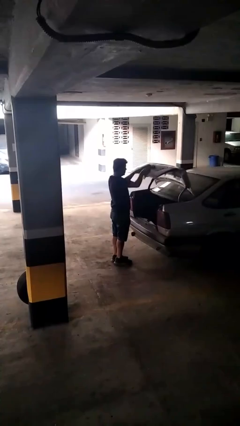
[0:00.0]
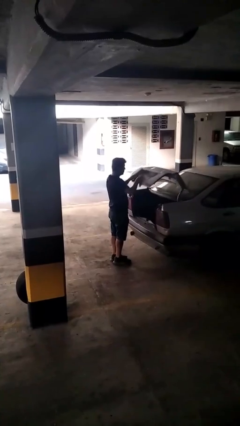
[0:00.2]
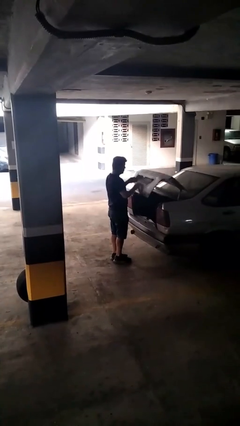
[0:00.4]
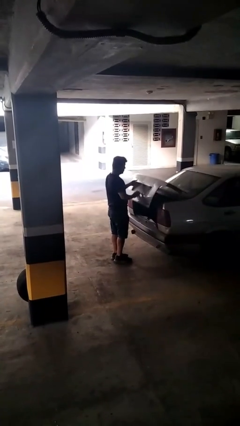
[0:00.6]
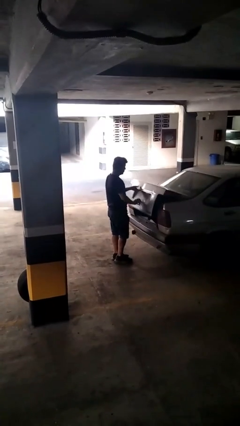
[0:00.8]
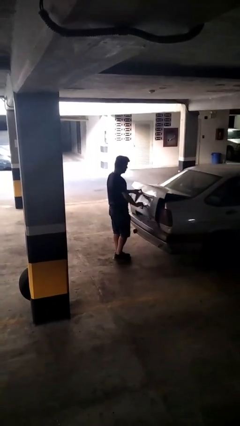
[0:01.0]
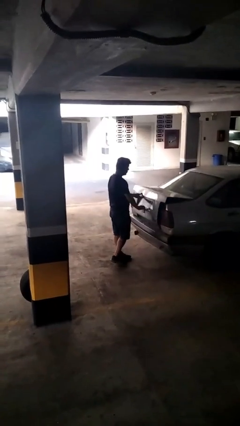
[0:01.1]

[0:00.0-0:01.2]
person closes car trunk

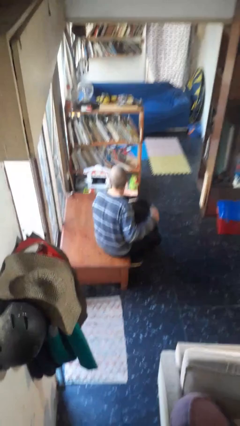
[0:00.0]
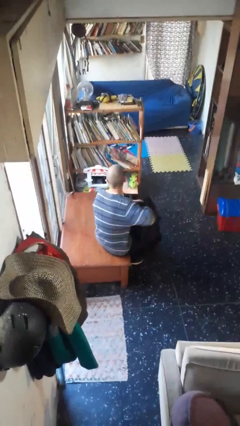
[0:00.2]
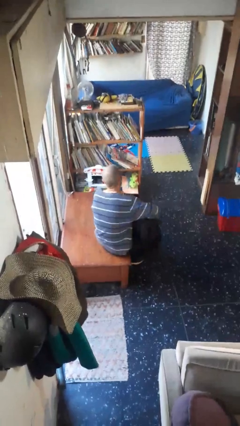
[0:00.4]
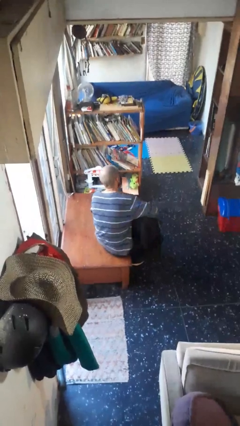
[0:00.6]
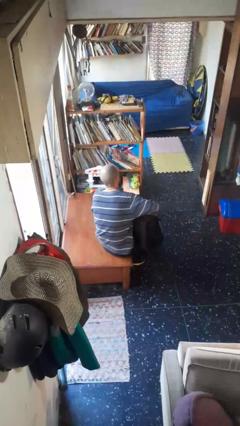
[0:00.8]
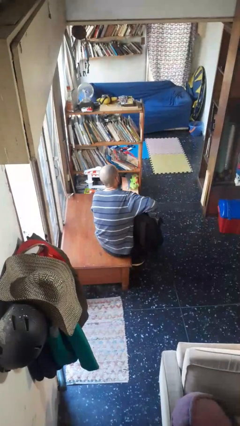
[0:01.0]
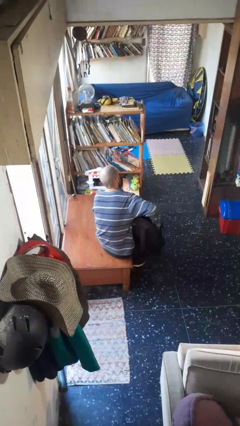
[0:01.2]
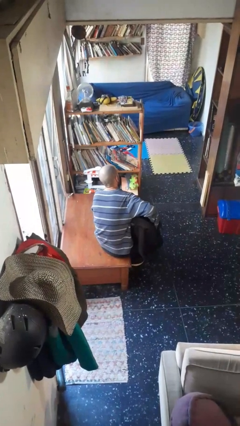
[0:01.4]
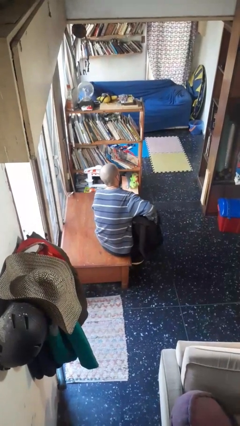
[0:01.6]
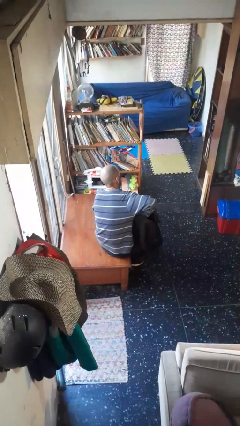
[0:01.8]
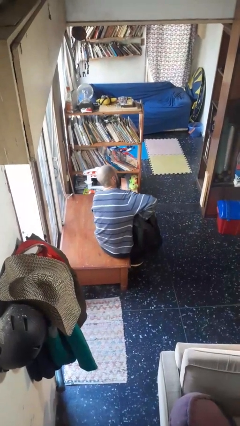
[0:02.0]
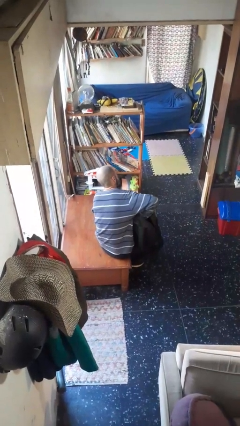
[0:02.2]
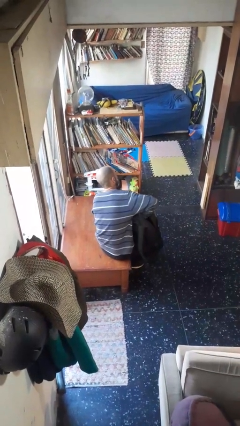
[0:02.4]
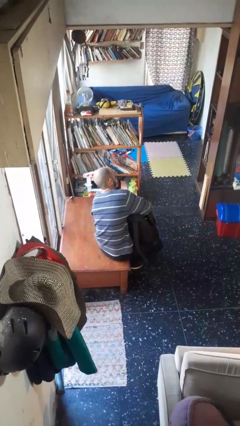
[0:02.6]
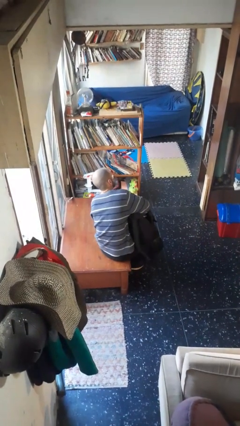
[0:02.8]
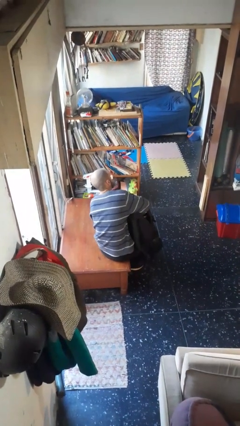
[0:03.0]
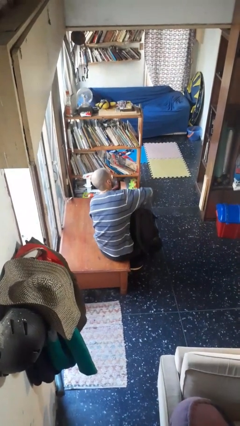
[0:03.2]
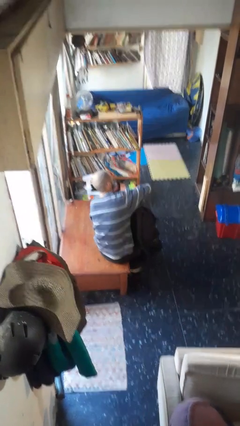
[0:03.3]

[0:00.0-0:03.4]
person searches in backpack

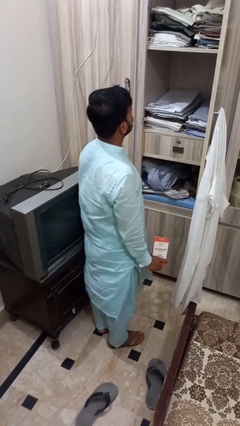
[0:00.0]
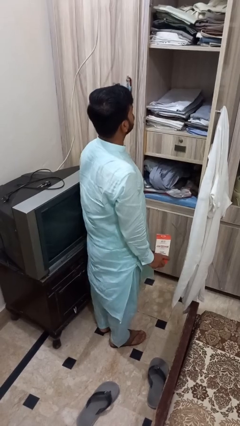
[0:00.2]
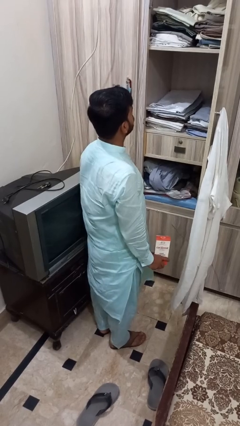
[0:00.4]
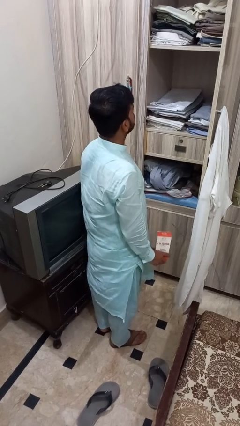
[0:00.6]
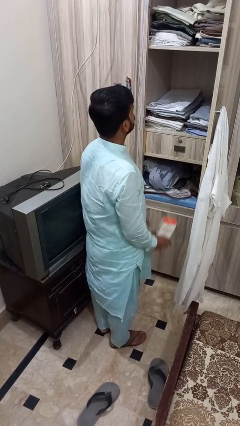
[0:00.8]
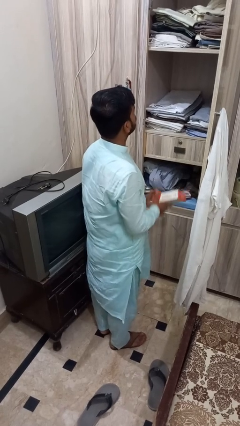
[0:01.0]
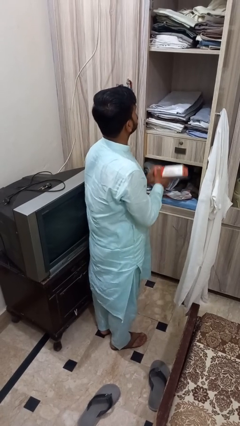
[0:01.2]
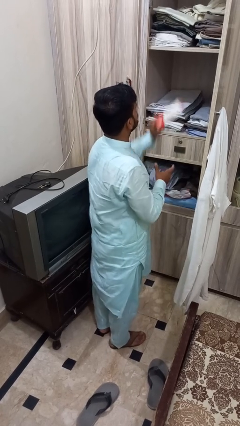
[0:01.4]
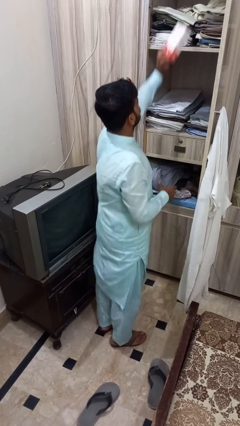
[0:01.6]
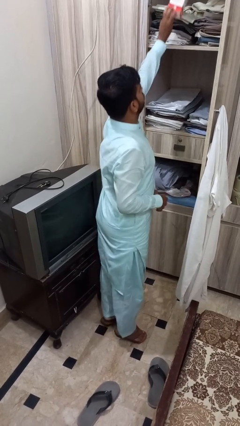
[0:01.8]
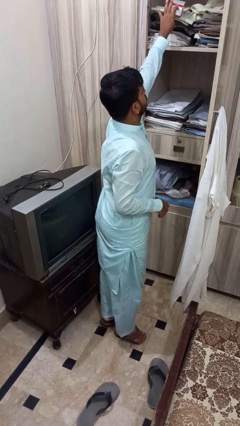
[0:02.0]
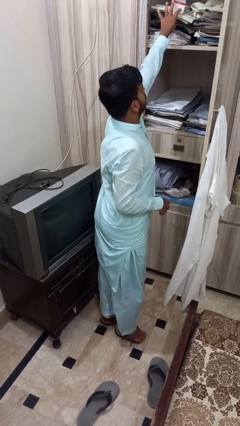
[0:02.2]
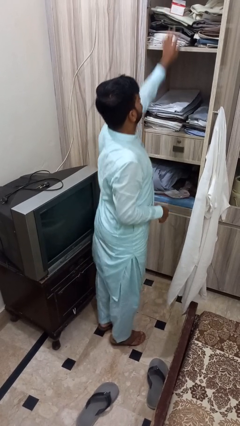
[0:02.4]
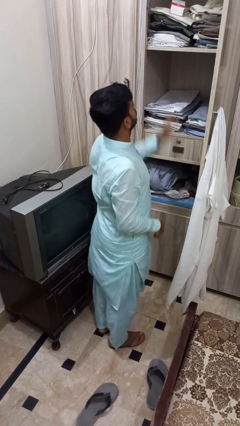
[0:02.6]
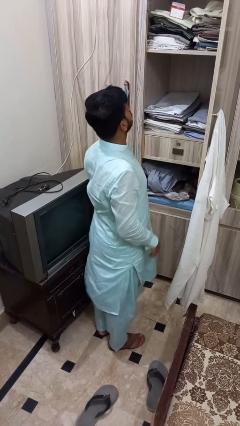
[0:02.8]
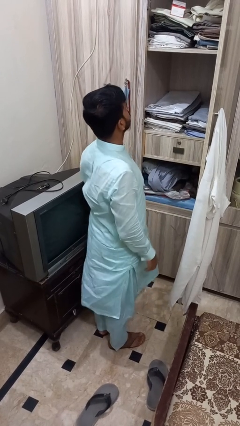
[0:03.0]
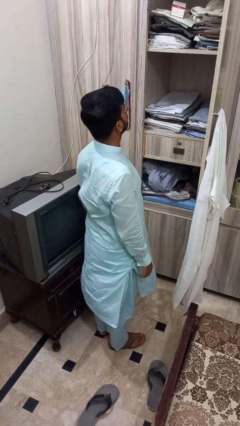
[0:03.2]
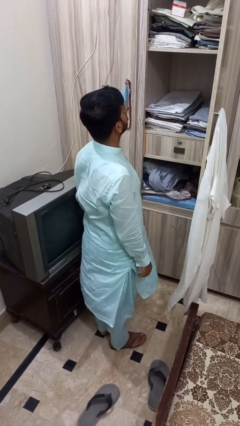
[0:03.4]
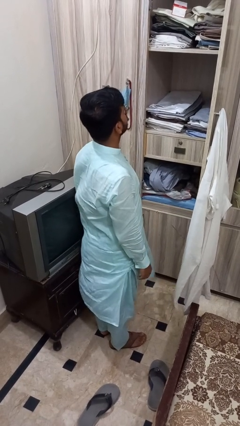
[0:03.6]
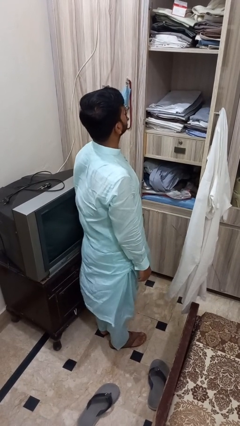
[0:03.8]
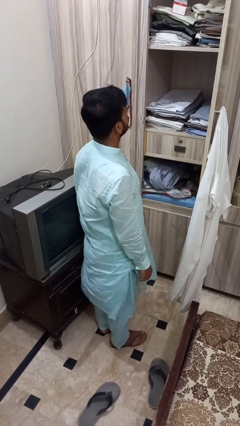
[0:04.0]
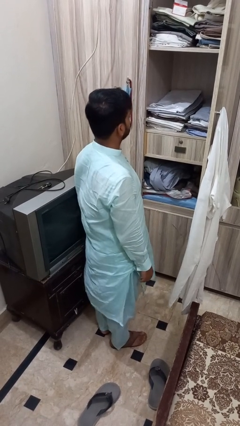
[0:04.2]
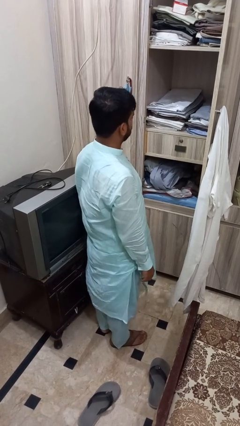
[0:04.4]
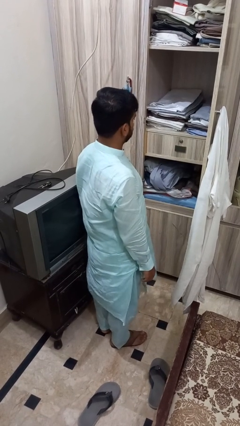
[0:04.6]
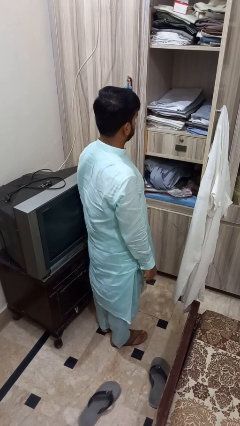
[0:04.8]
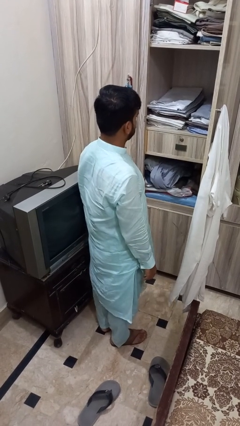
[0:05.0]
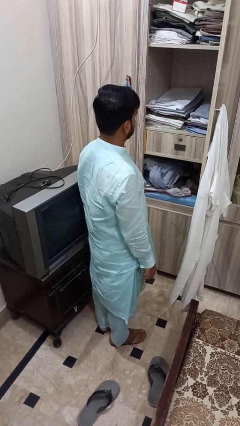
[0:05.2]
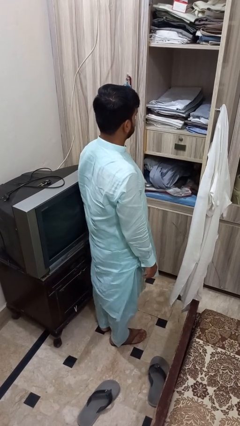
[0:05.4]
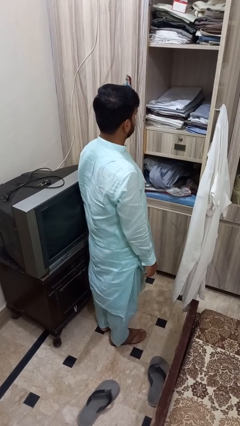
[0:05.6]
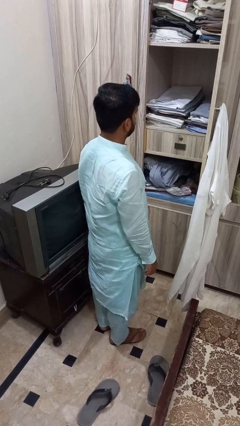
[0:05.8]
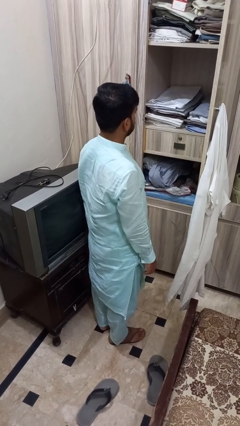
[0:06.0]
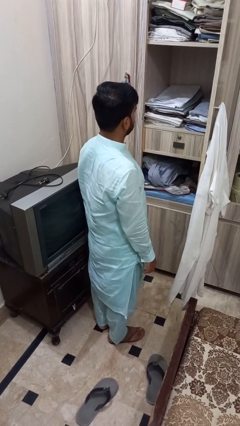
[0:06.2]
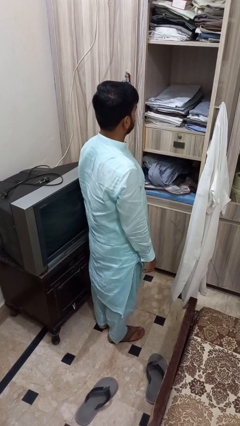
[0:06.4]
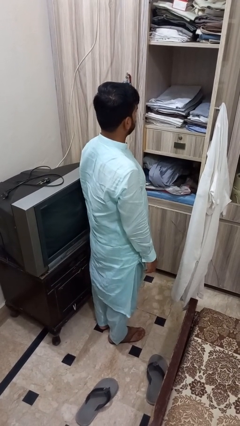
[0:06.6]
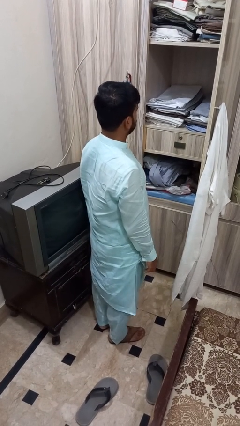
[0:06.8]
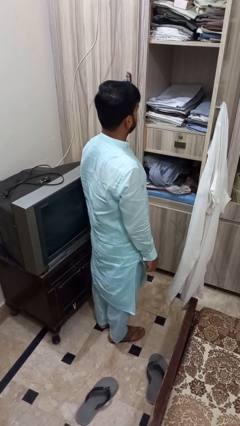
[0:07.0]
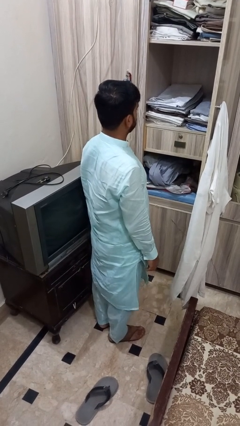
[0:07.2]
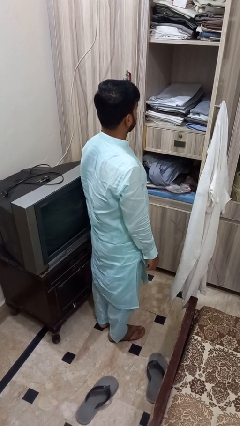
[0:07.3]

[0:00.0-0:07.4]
person puts down object on shelf

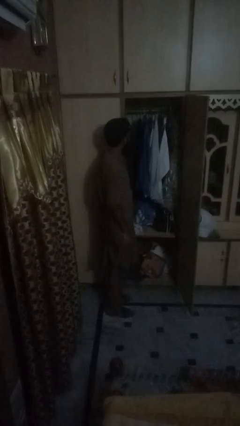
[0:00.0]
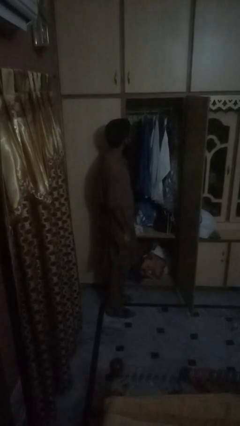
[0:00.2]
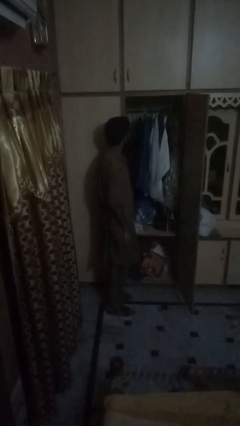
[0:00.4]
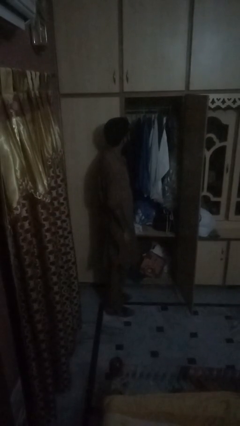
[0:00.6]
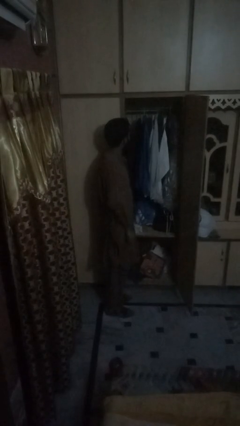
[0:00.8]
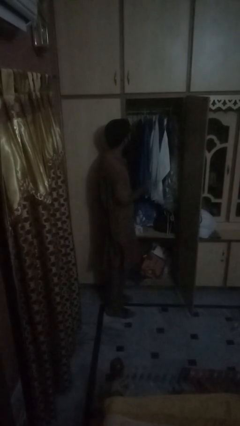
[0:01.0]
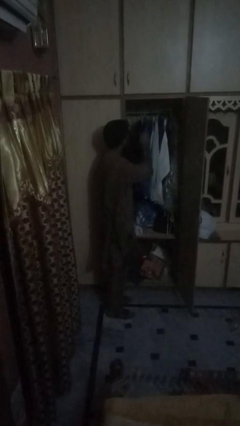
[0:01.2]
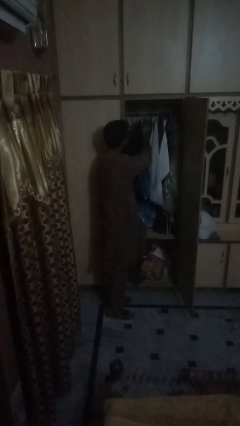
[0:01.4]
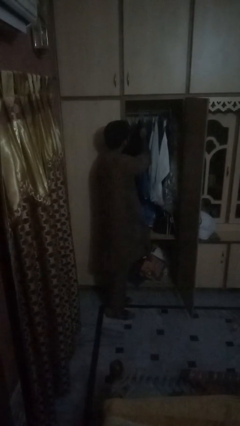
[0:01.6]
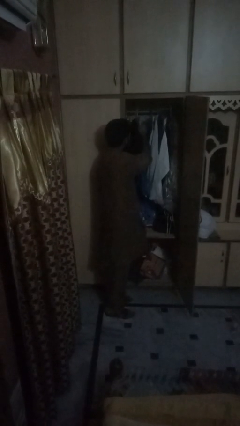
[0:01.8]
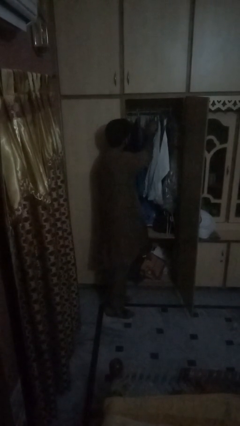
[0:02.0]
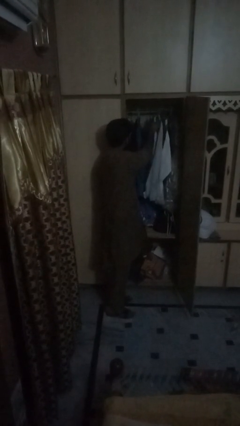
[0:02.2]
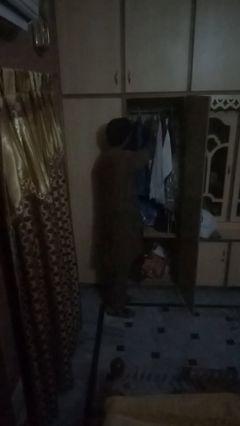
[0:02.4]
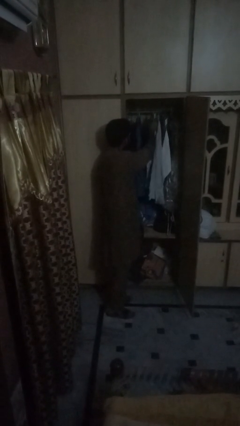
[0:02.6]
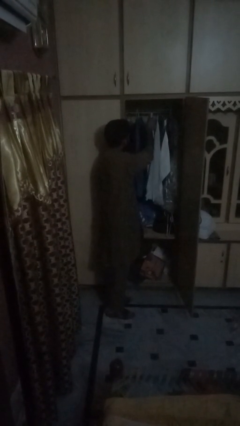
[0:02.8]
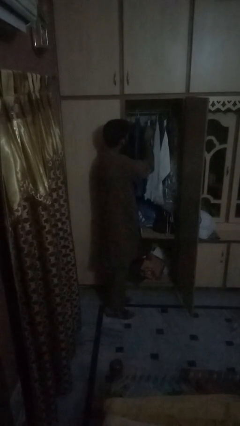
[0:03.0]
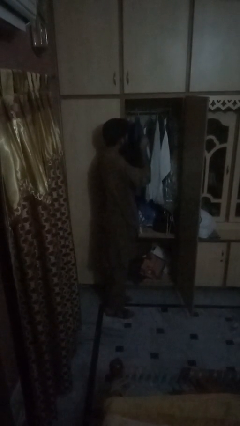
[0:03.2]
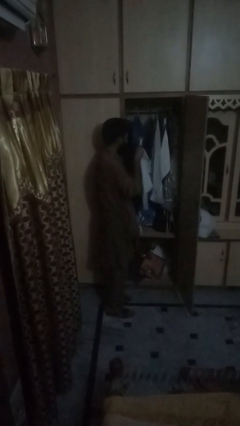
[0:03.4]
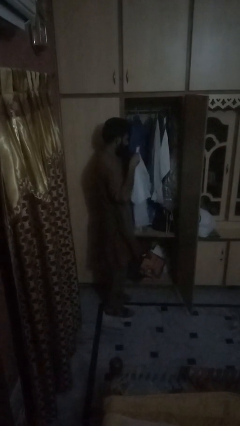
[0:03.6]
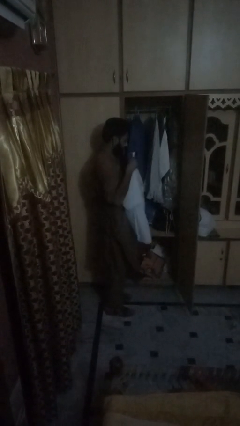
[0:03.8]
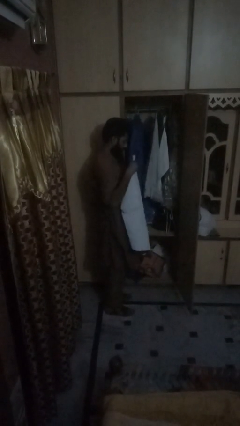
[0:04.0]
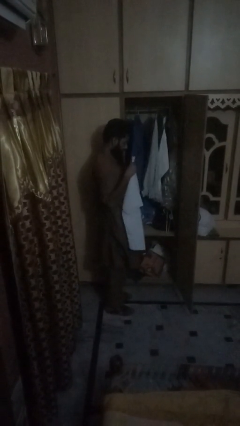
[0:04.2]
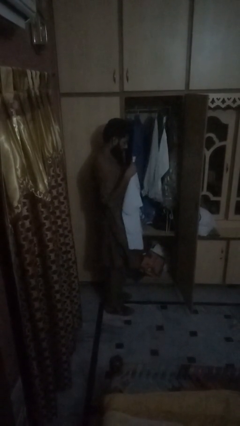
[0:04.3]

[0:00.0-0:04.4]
person puts clothes into dresser

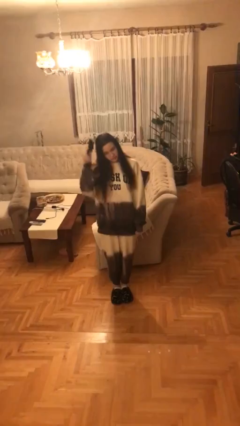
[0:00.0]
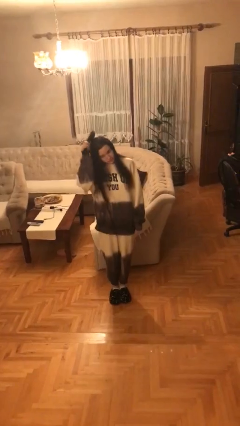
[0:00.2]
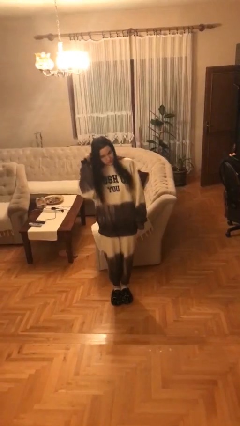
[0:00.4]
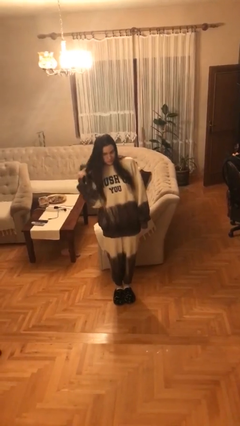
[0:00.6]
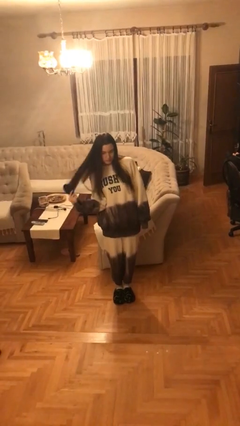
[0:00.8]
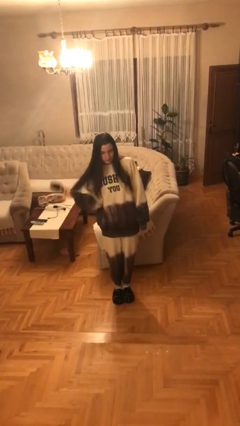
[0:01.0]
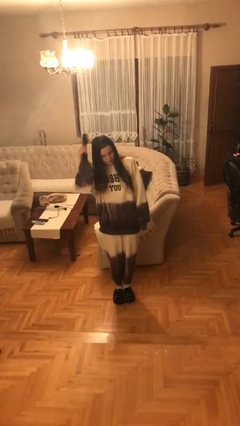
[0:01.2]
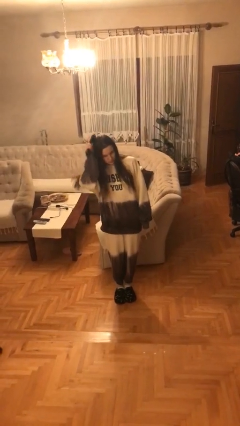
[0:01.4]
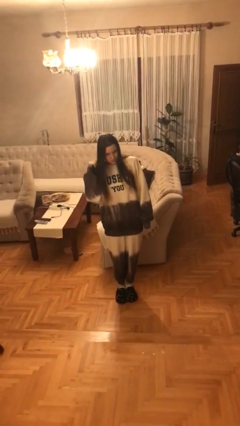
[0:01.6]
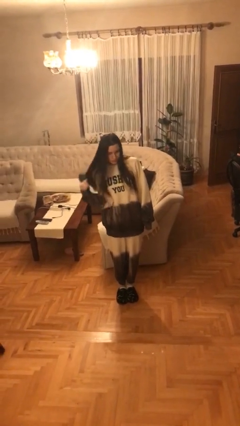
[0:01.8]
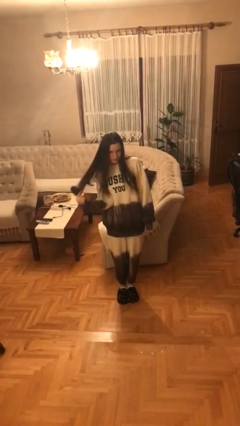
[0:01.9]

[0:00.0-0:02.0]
person brushes hair
